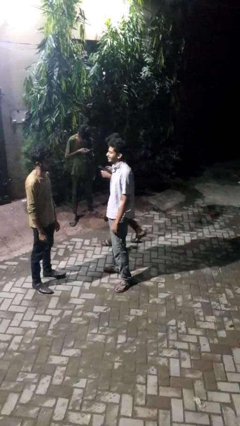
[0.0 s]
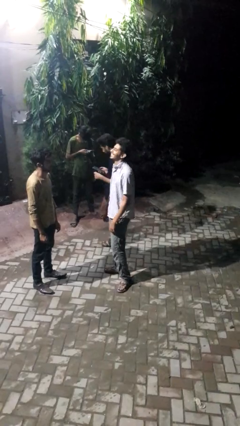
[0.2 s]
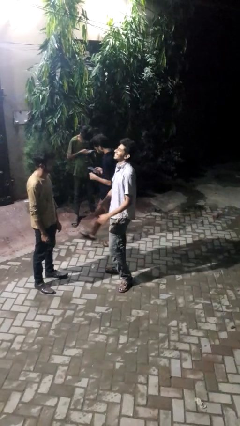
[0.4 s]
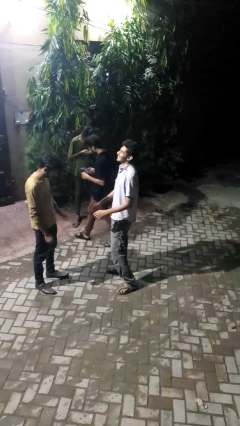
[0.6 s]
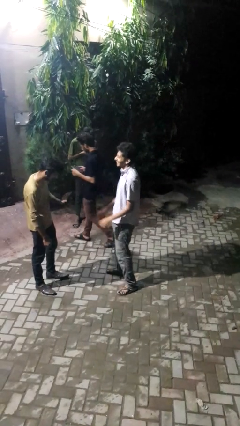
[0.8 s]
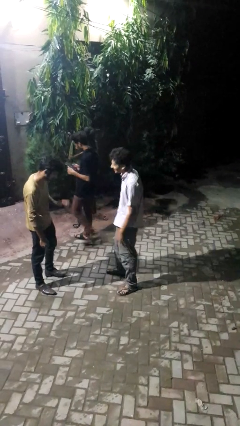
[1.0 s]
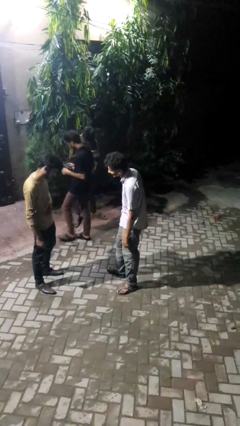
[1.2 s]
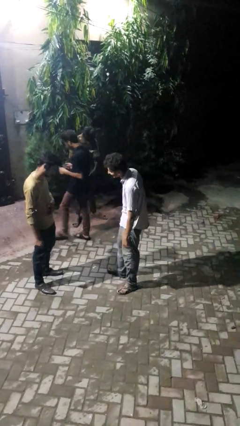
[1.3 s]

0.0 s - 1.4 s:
person laughs with person

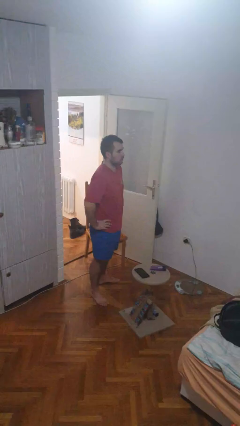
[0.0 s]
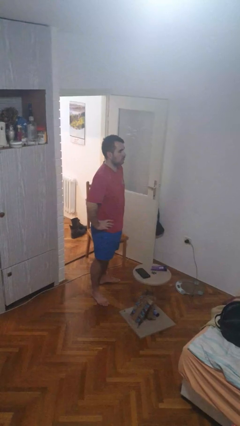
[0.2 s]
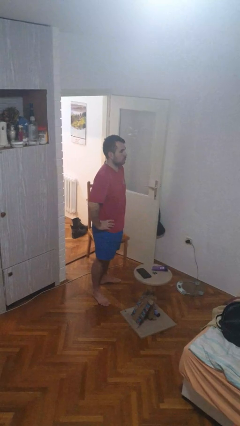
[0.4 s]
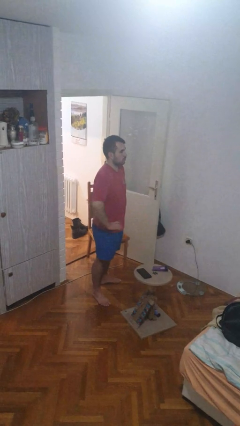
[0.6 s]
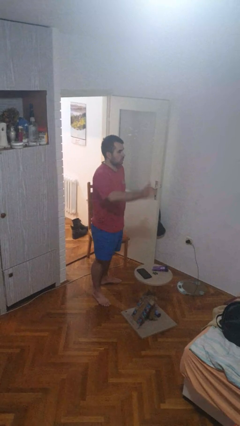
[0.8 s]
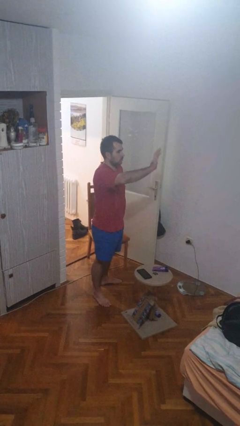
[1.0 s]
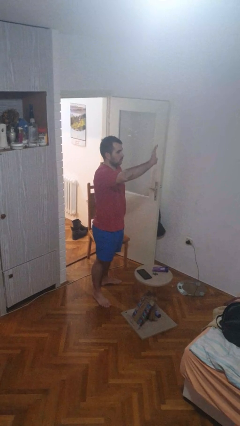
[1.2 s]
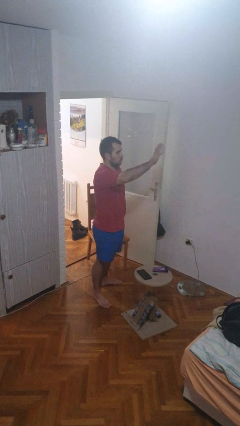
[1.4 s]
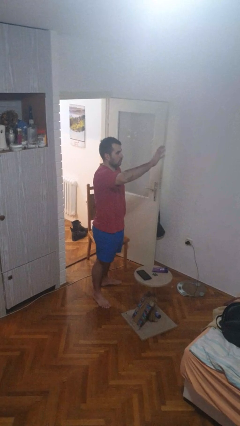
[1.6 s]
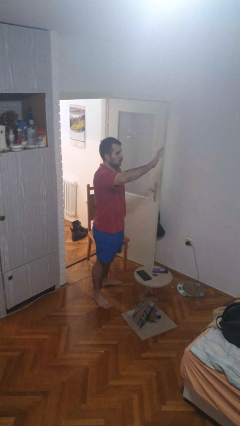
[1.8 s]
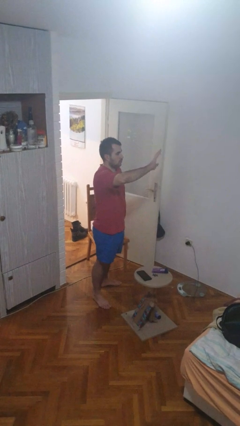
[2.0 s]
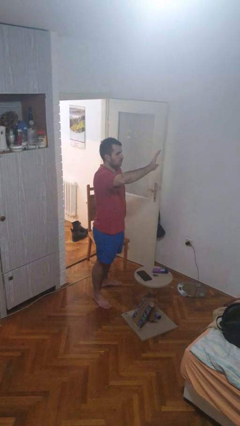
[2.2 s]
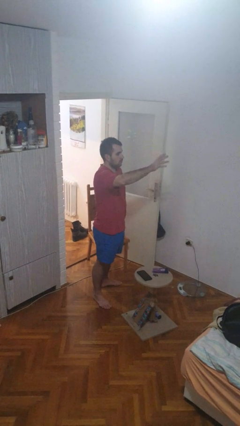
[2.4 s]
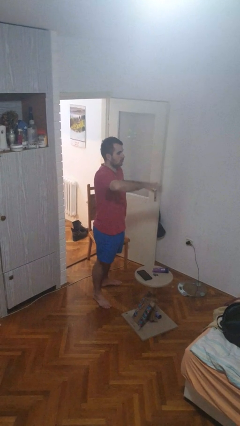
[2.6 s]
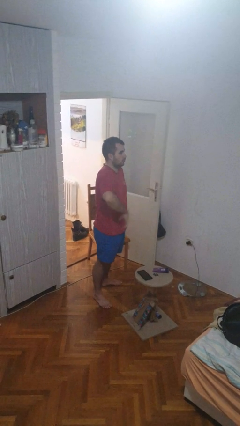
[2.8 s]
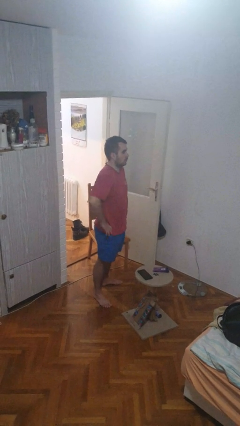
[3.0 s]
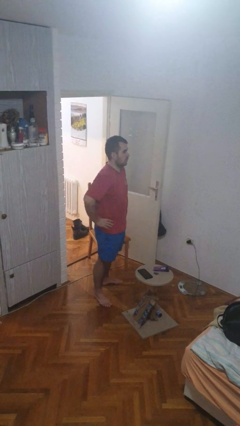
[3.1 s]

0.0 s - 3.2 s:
person waves at person

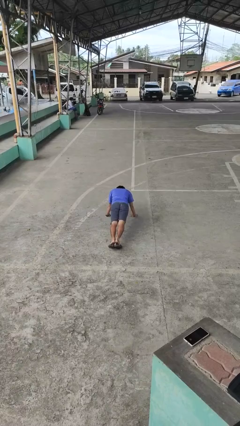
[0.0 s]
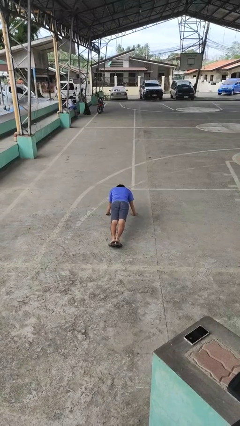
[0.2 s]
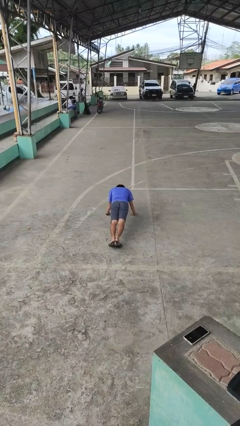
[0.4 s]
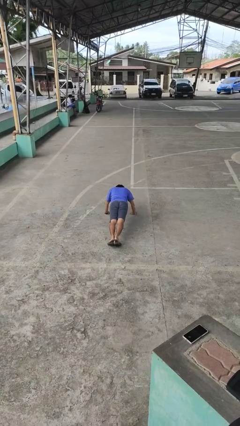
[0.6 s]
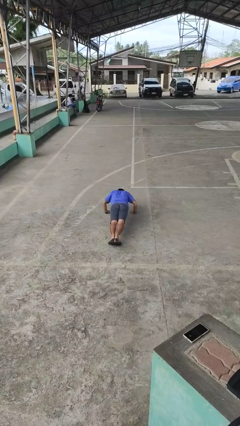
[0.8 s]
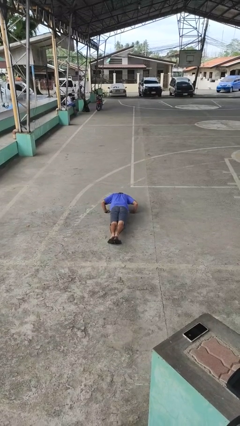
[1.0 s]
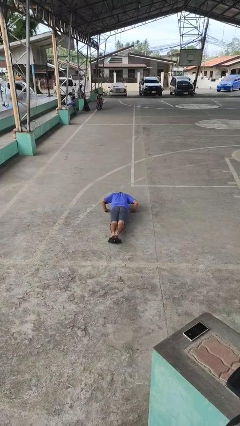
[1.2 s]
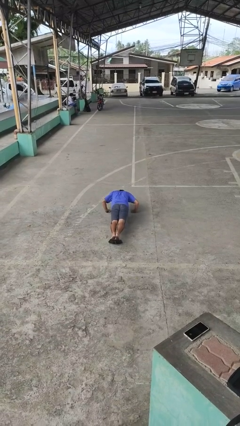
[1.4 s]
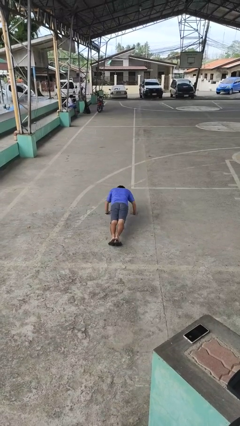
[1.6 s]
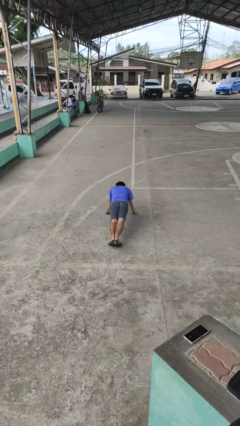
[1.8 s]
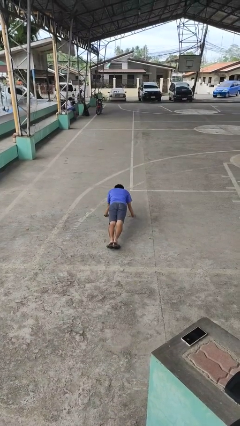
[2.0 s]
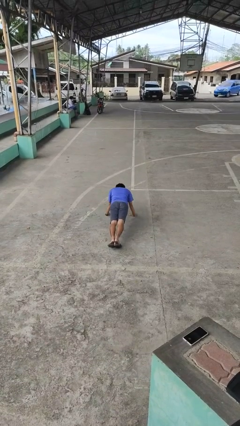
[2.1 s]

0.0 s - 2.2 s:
person exercises with pushup

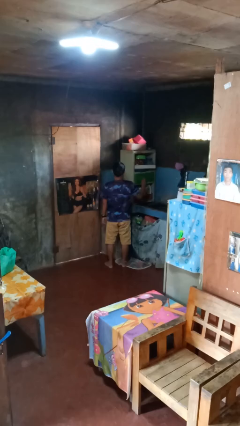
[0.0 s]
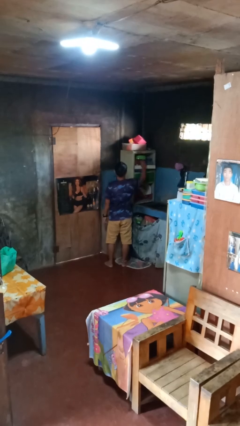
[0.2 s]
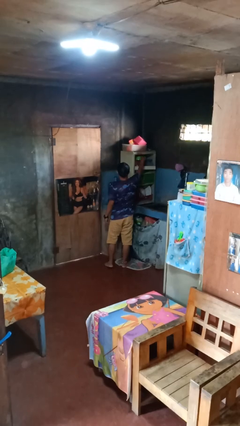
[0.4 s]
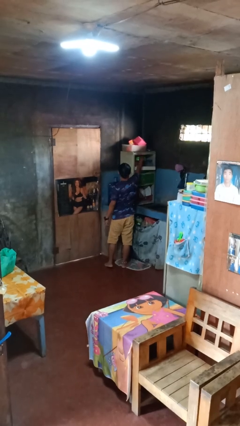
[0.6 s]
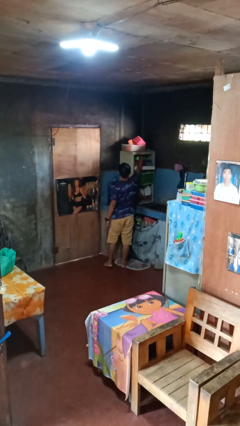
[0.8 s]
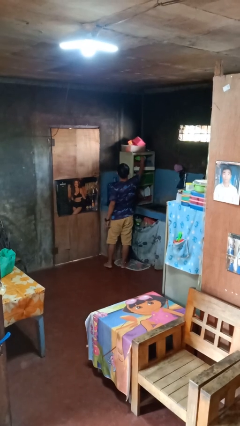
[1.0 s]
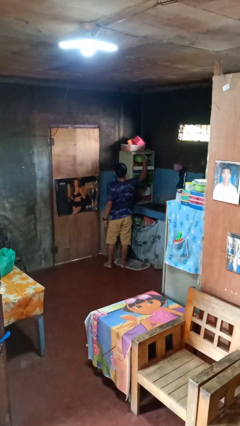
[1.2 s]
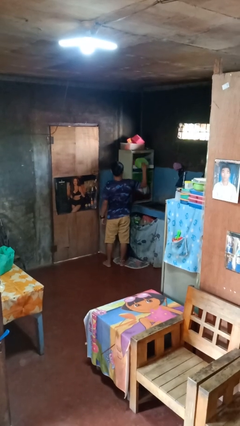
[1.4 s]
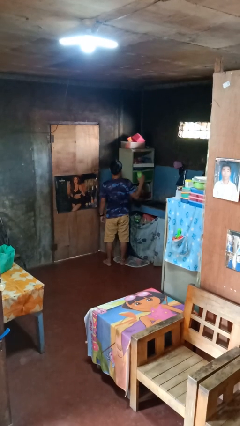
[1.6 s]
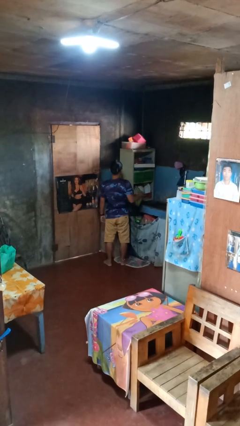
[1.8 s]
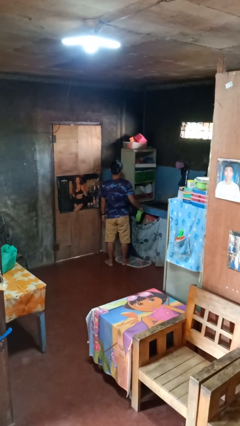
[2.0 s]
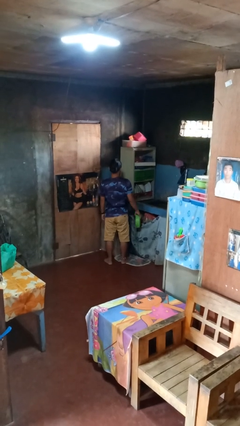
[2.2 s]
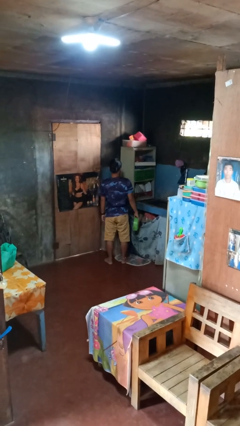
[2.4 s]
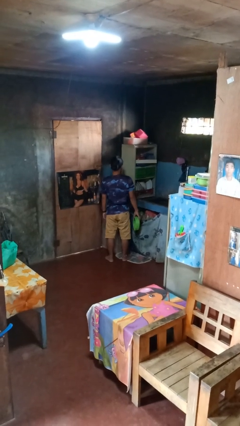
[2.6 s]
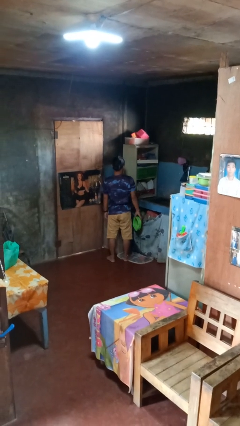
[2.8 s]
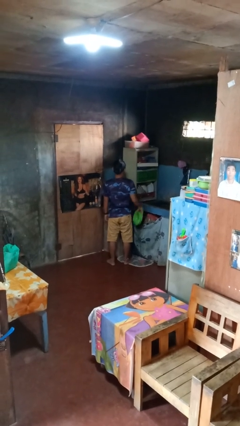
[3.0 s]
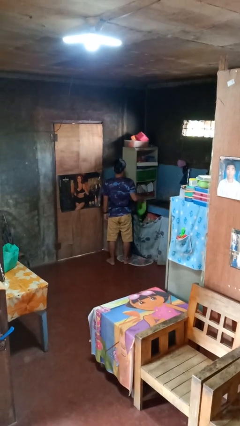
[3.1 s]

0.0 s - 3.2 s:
person takes object from cabinet

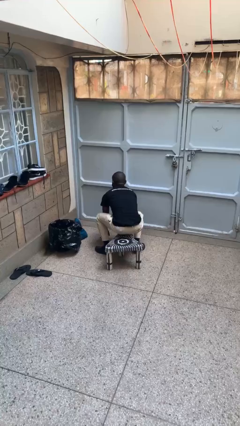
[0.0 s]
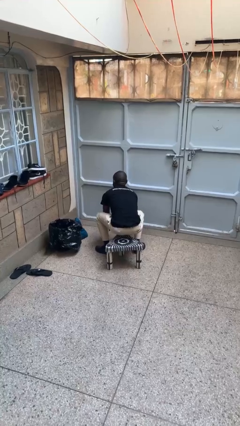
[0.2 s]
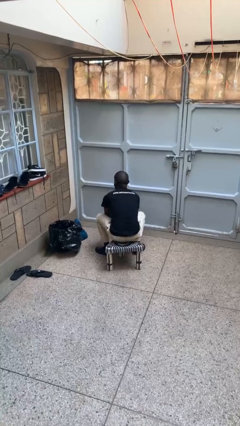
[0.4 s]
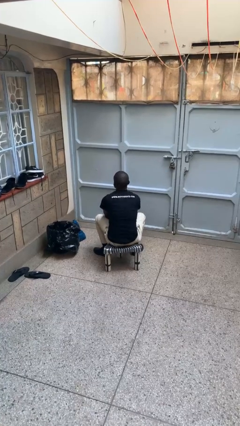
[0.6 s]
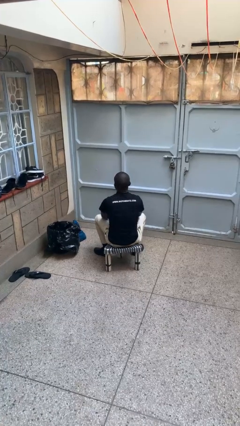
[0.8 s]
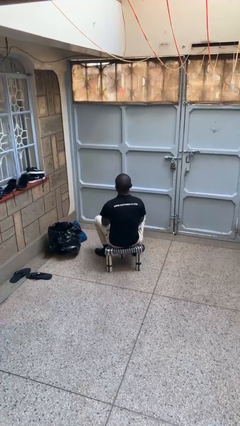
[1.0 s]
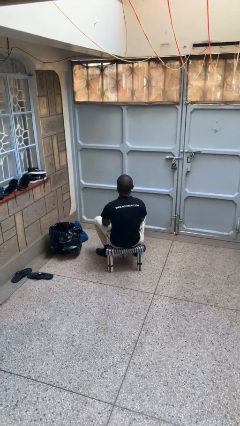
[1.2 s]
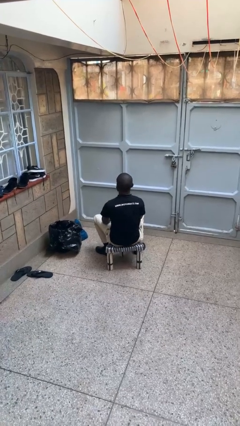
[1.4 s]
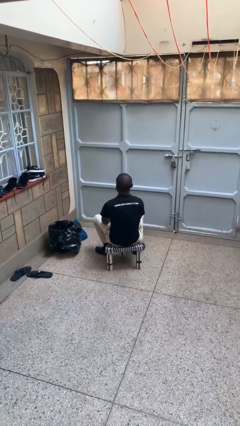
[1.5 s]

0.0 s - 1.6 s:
person sits down

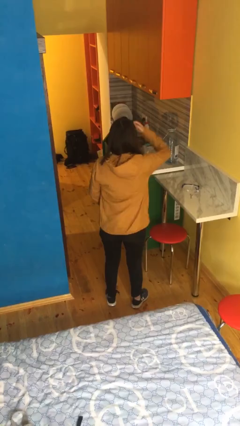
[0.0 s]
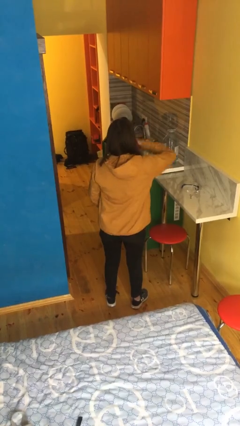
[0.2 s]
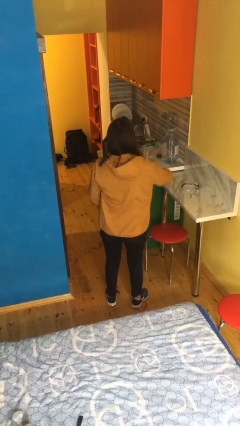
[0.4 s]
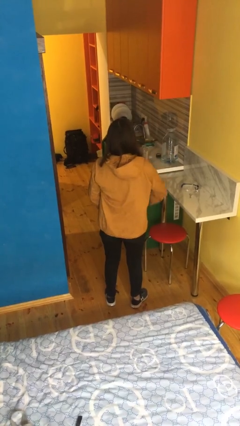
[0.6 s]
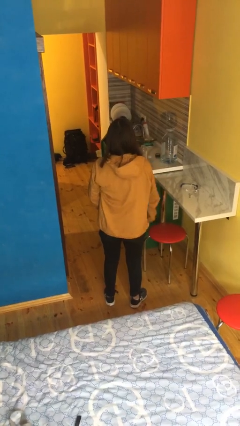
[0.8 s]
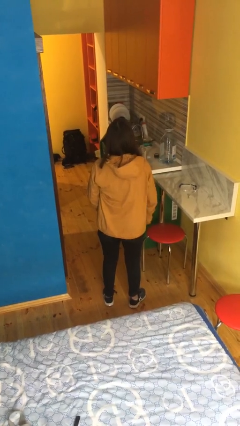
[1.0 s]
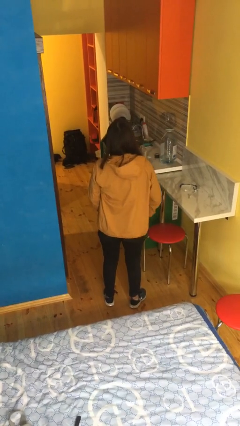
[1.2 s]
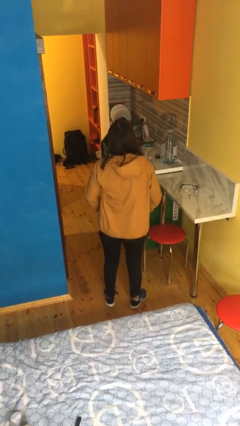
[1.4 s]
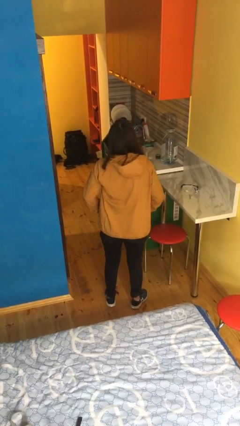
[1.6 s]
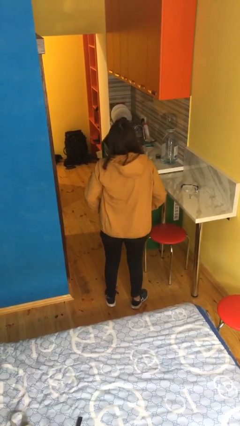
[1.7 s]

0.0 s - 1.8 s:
person unzips jacket

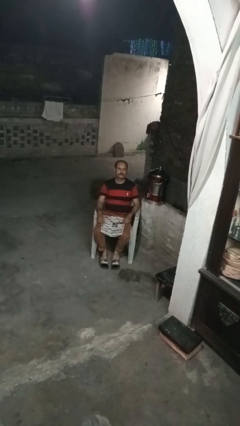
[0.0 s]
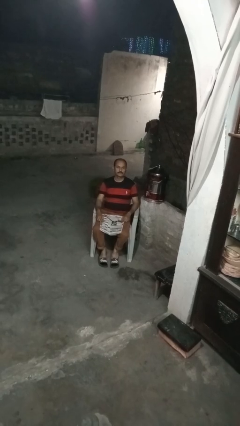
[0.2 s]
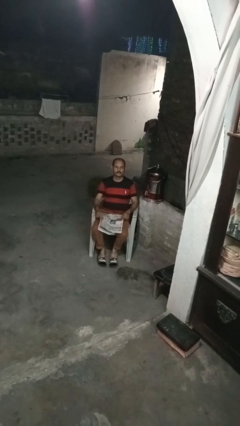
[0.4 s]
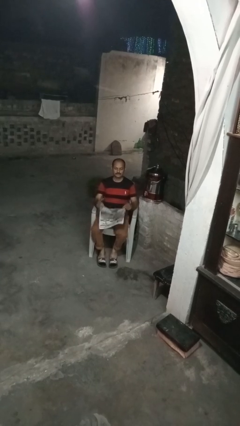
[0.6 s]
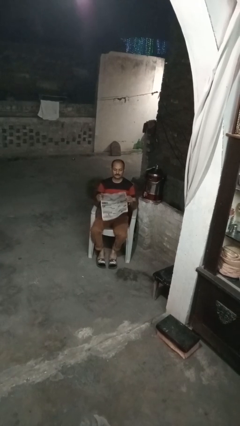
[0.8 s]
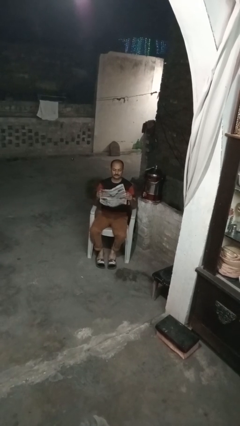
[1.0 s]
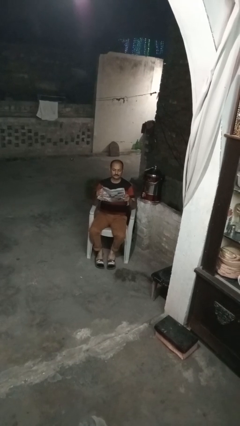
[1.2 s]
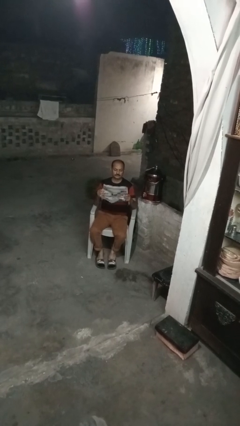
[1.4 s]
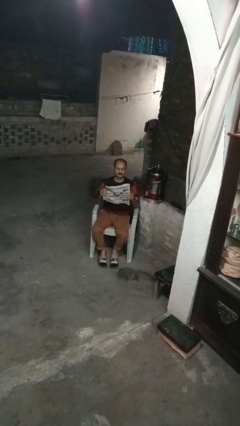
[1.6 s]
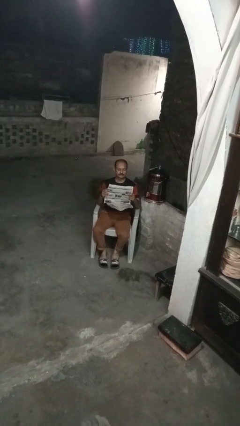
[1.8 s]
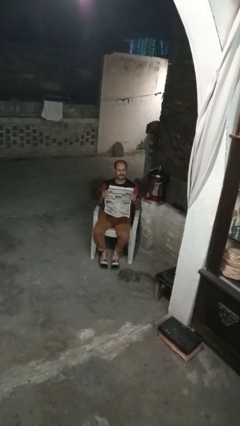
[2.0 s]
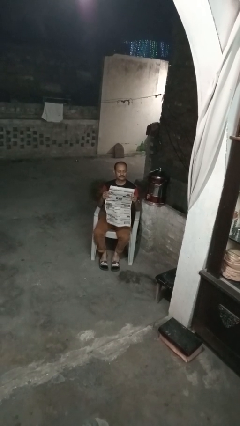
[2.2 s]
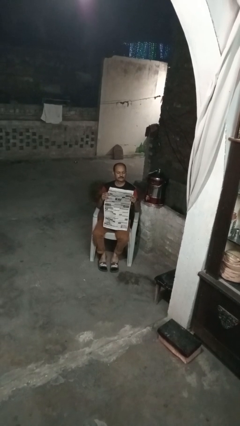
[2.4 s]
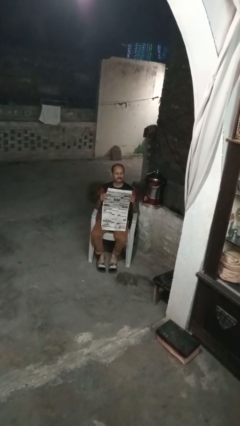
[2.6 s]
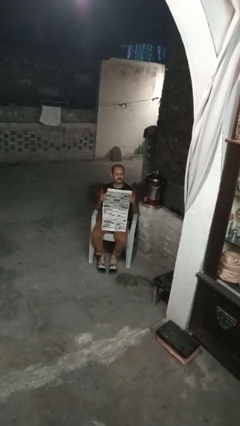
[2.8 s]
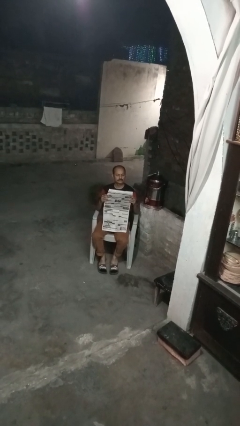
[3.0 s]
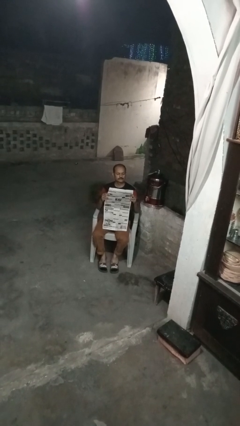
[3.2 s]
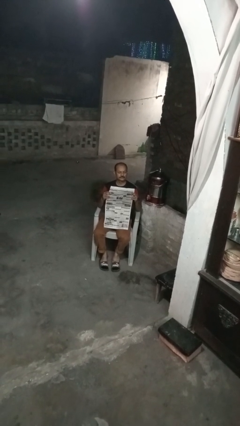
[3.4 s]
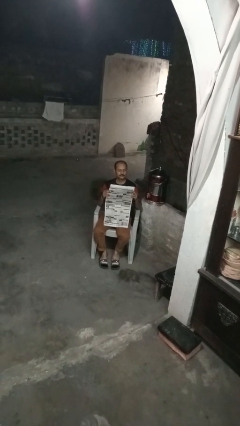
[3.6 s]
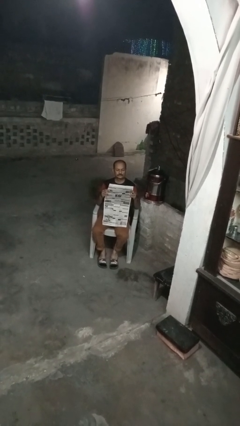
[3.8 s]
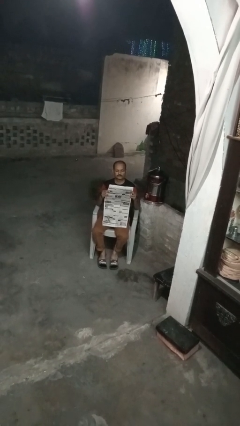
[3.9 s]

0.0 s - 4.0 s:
person reads newspaper
